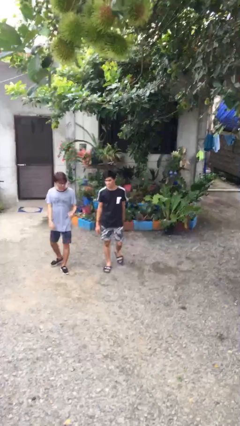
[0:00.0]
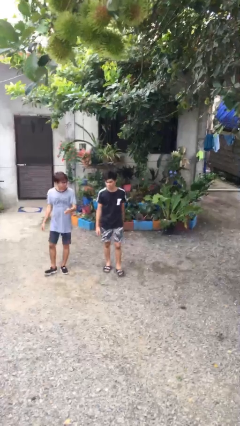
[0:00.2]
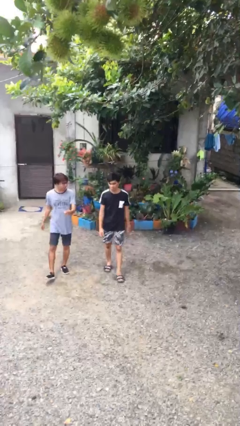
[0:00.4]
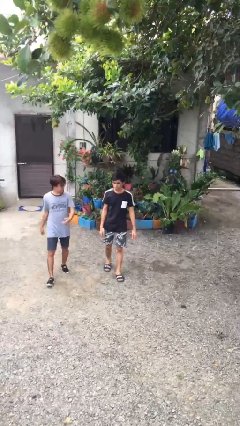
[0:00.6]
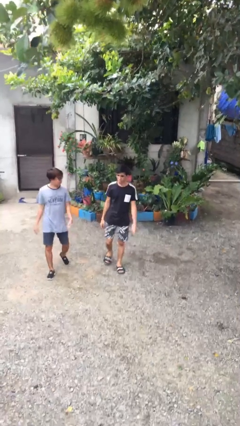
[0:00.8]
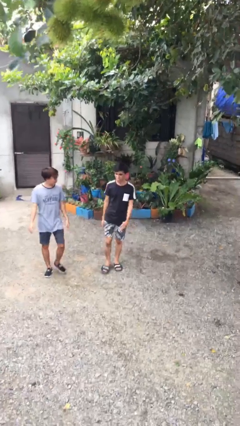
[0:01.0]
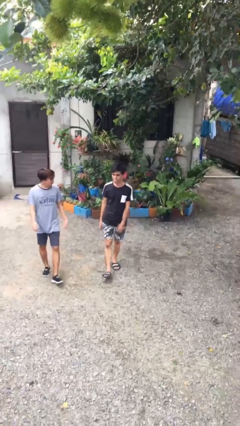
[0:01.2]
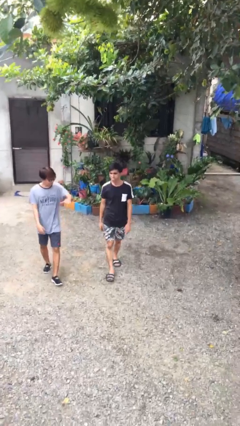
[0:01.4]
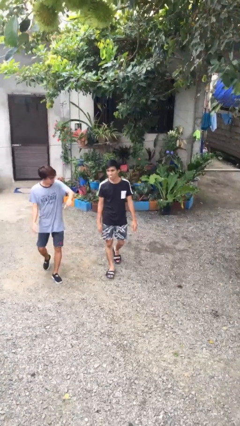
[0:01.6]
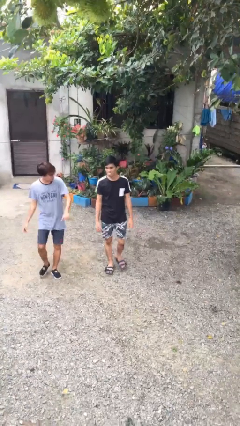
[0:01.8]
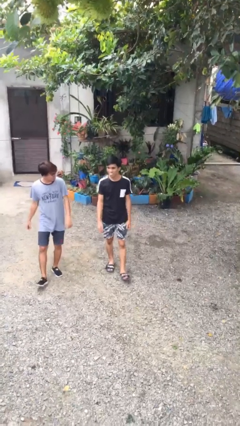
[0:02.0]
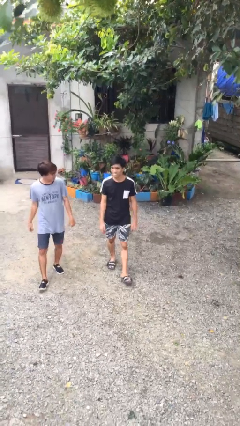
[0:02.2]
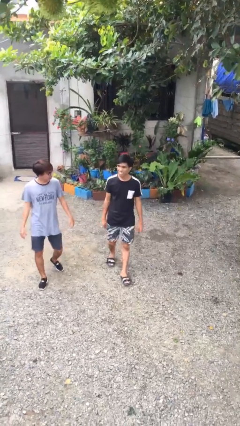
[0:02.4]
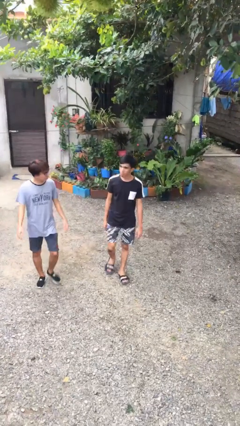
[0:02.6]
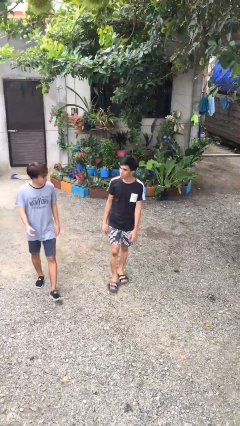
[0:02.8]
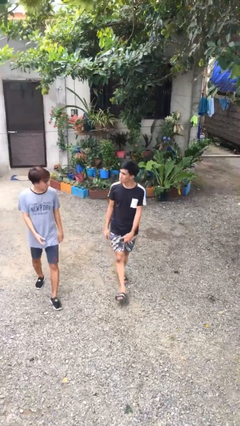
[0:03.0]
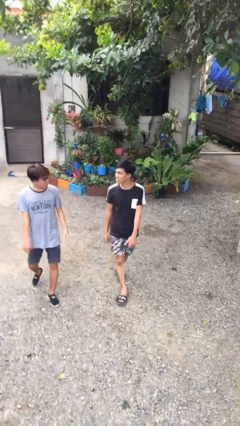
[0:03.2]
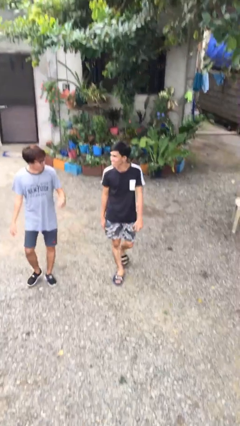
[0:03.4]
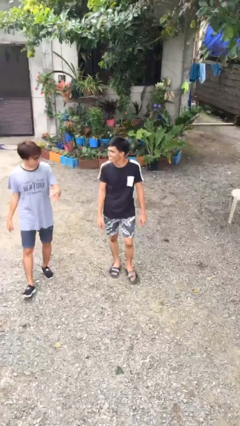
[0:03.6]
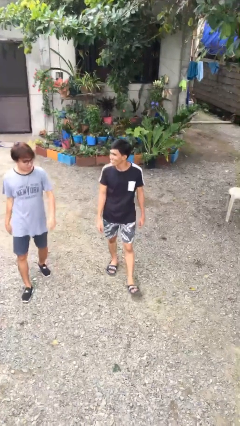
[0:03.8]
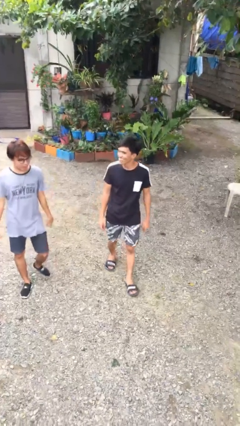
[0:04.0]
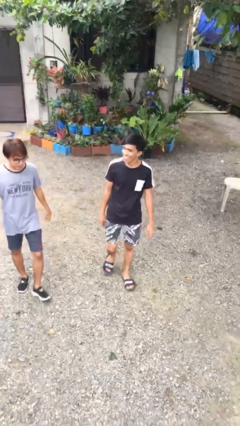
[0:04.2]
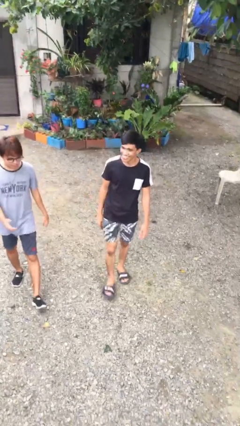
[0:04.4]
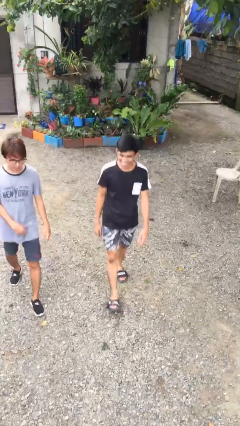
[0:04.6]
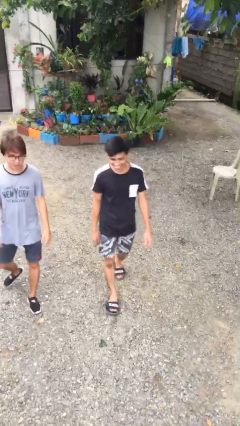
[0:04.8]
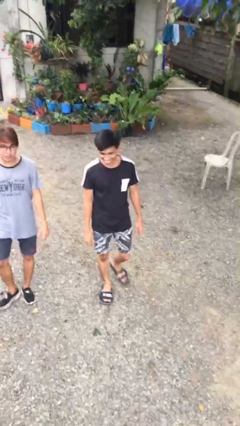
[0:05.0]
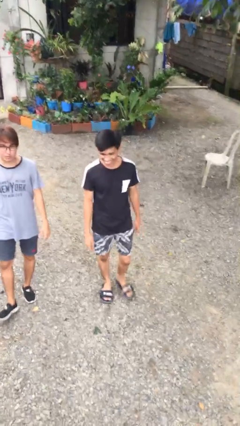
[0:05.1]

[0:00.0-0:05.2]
person talks to person

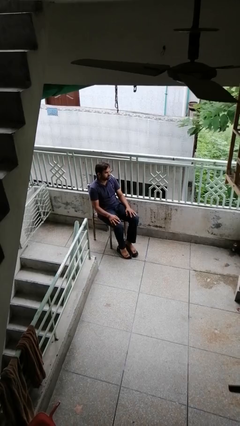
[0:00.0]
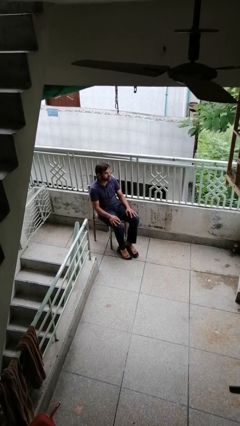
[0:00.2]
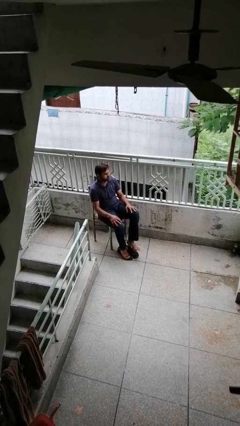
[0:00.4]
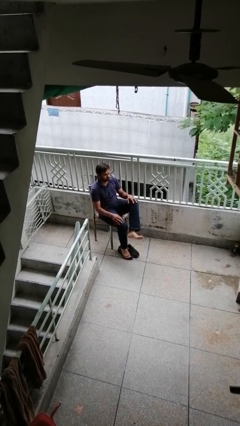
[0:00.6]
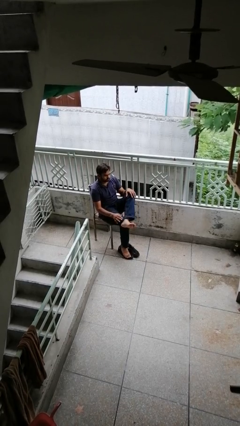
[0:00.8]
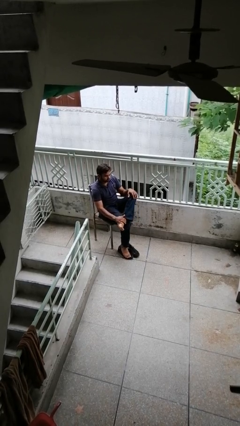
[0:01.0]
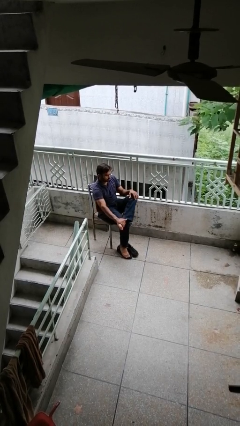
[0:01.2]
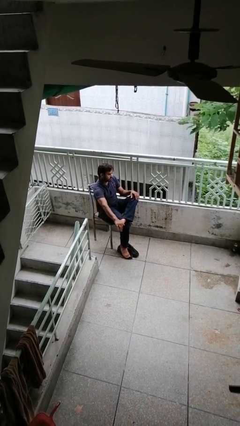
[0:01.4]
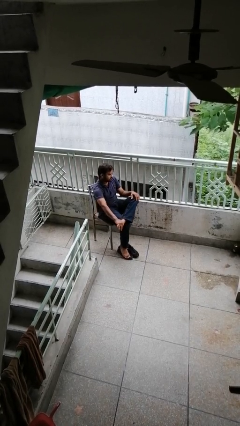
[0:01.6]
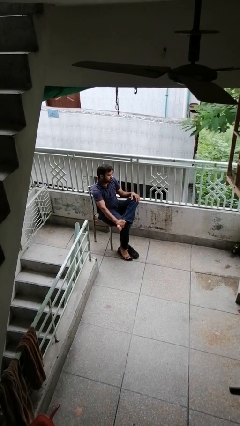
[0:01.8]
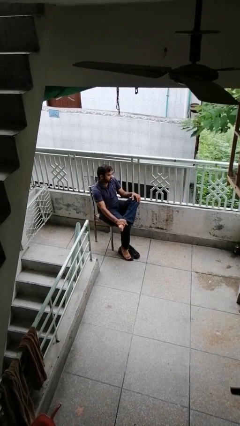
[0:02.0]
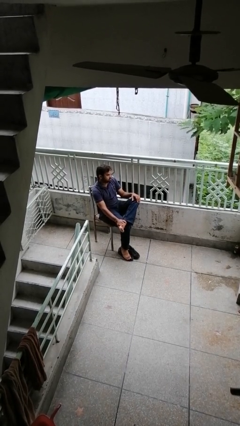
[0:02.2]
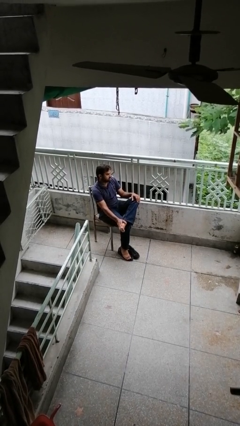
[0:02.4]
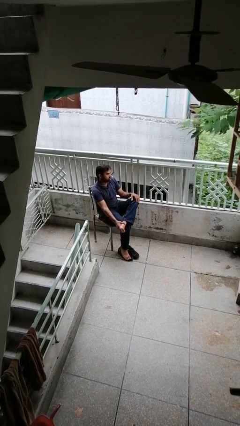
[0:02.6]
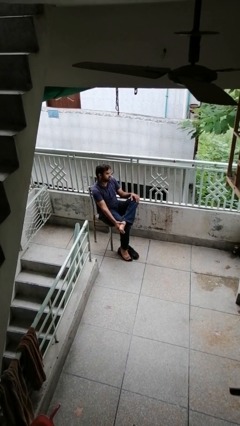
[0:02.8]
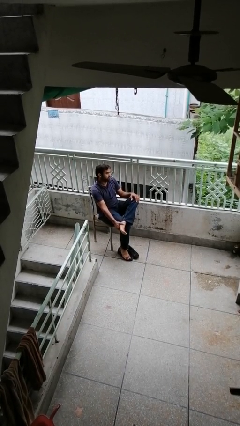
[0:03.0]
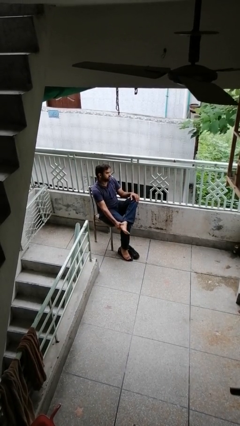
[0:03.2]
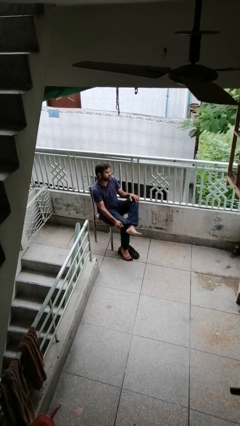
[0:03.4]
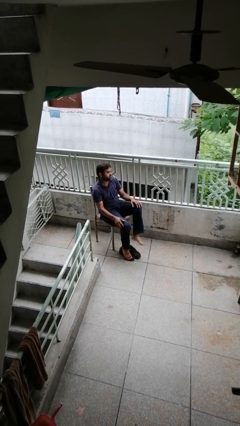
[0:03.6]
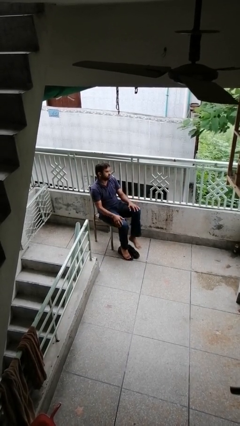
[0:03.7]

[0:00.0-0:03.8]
person rubs foot

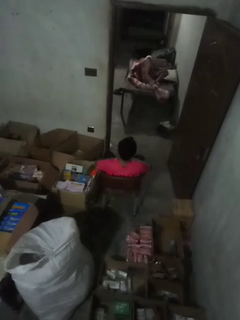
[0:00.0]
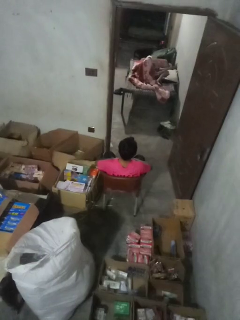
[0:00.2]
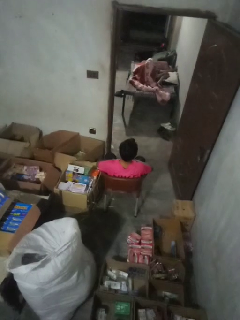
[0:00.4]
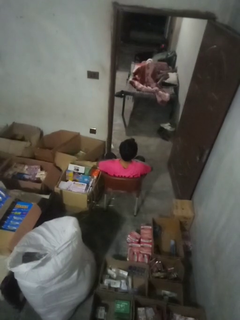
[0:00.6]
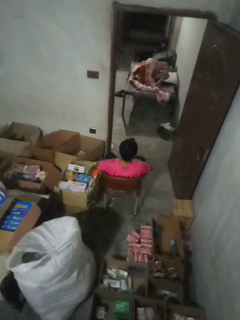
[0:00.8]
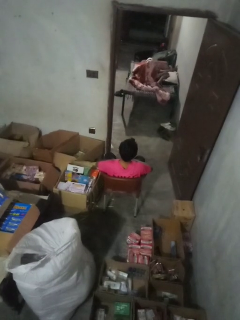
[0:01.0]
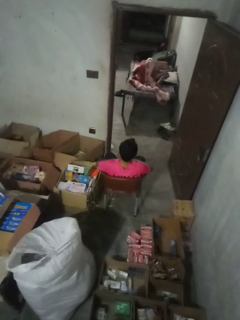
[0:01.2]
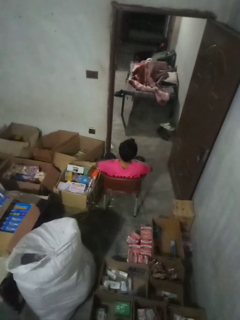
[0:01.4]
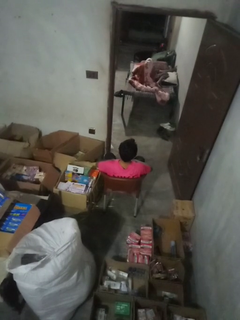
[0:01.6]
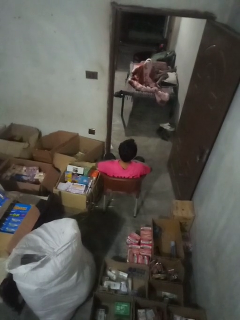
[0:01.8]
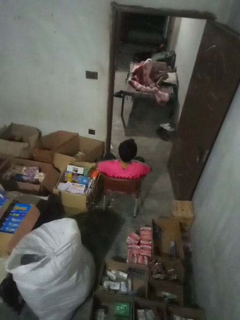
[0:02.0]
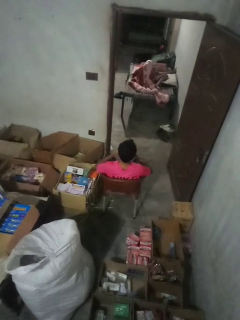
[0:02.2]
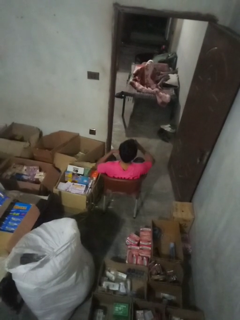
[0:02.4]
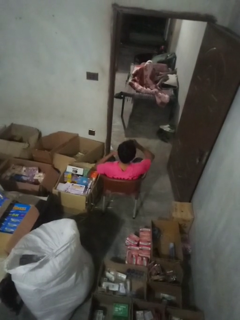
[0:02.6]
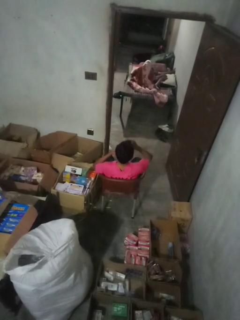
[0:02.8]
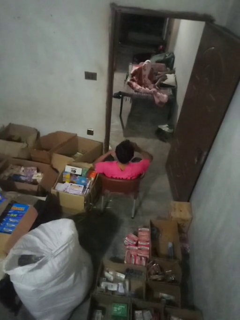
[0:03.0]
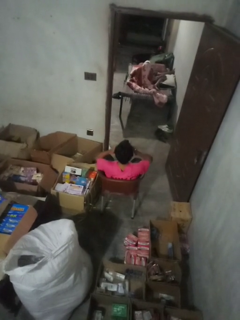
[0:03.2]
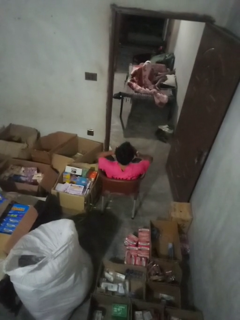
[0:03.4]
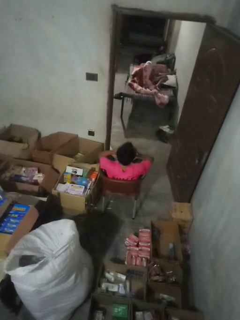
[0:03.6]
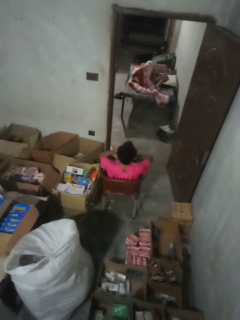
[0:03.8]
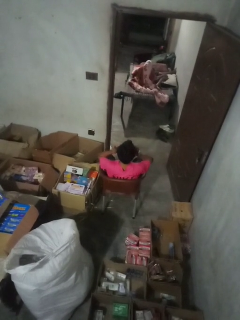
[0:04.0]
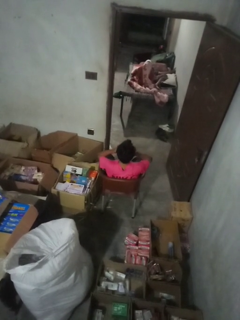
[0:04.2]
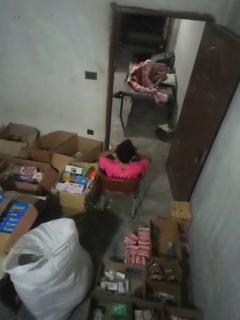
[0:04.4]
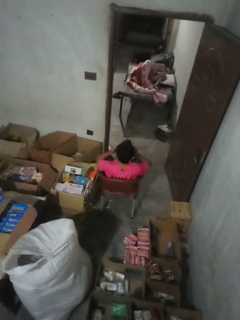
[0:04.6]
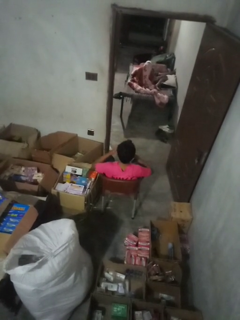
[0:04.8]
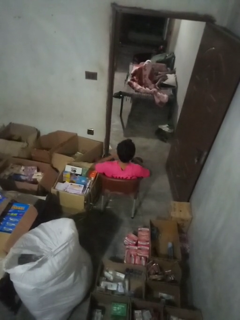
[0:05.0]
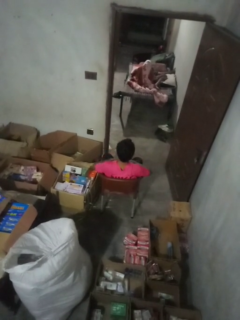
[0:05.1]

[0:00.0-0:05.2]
person rubs eyes

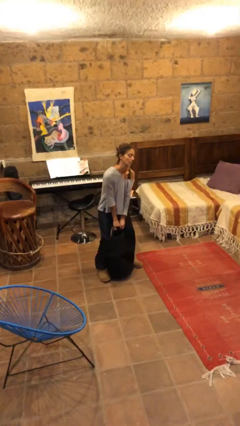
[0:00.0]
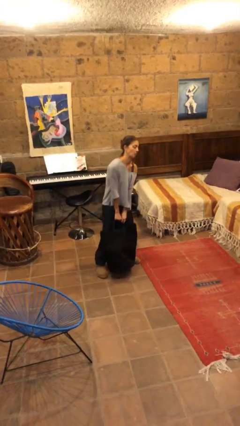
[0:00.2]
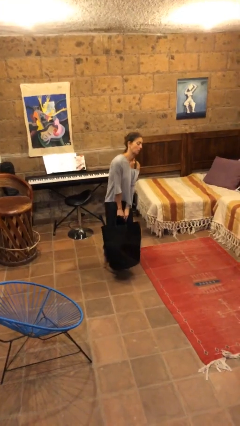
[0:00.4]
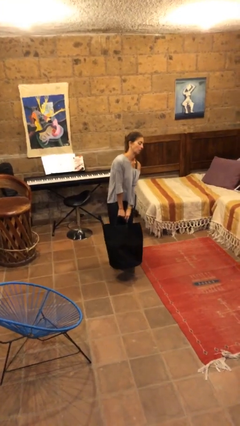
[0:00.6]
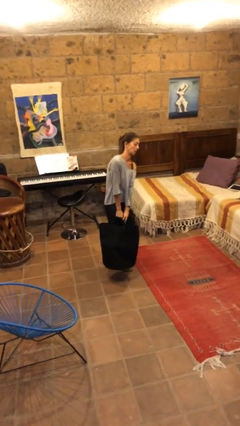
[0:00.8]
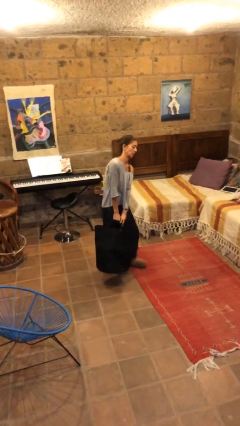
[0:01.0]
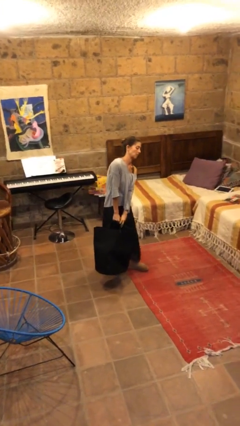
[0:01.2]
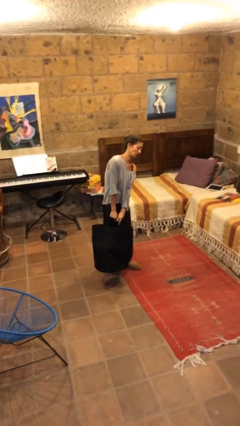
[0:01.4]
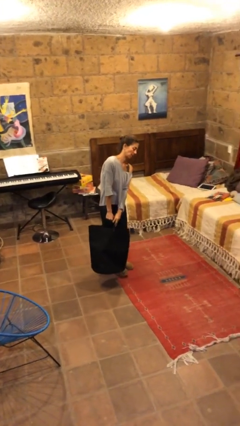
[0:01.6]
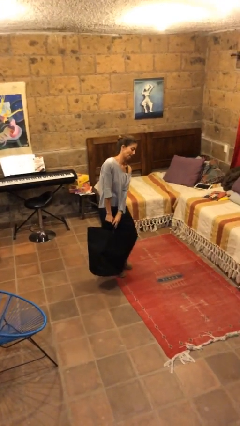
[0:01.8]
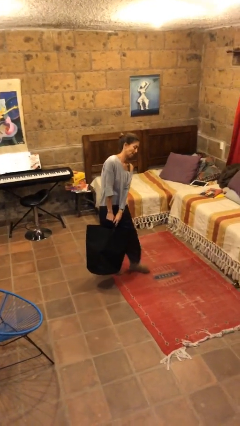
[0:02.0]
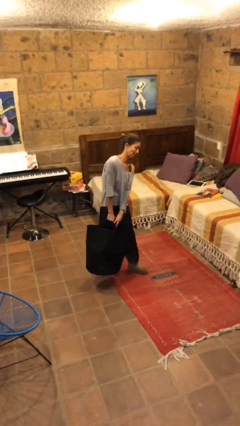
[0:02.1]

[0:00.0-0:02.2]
person carries heavy object

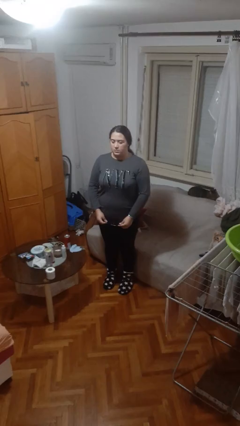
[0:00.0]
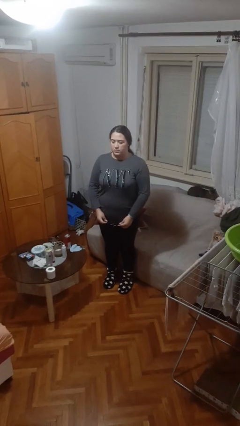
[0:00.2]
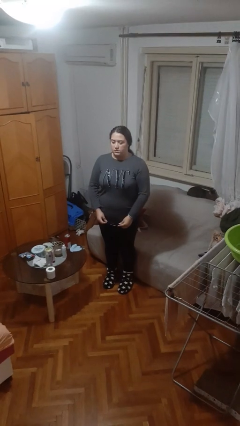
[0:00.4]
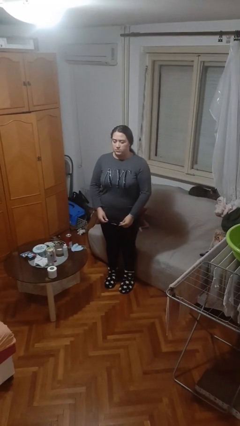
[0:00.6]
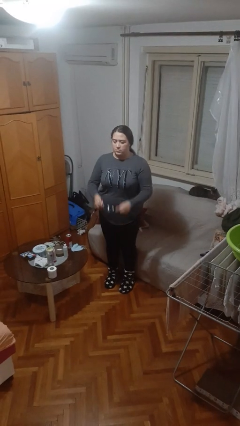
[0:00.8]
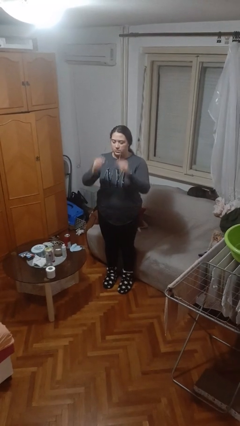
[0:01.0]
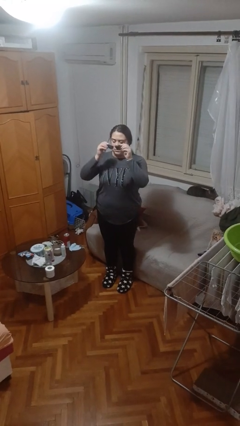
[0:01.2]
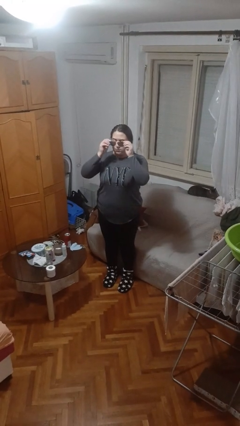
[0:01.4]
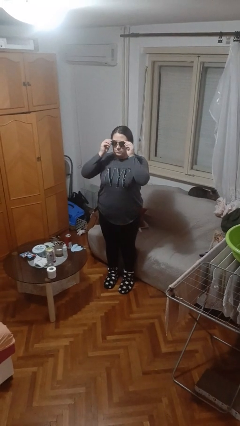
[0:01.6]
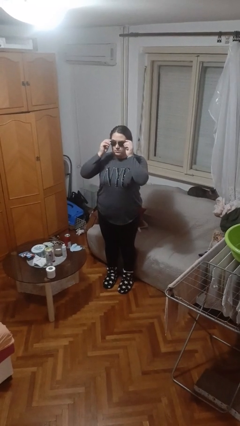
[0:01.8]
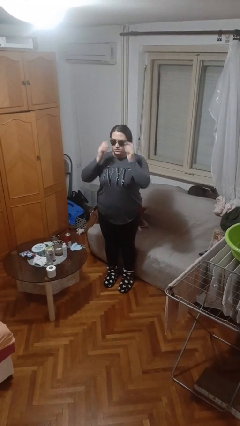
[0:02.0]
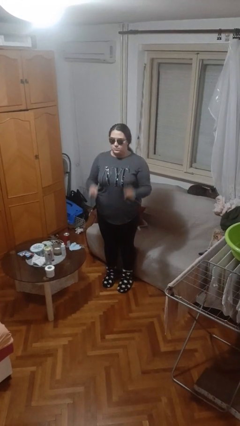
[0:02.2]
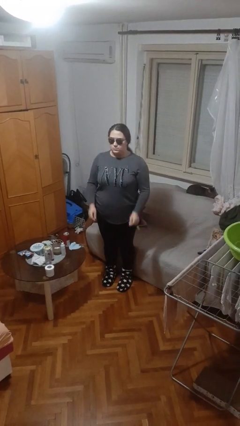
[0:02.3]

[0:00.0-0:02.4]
person puts on sunglasses
